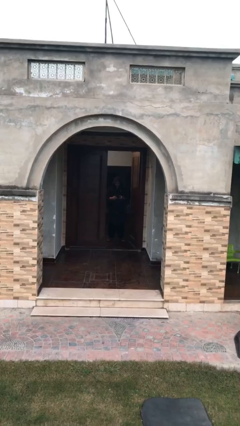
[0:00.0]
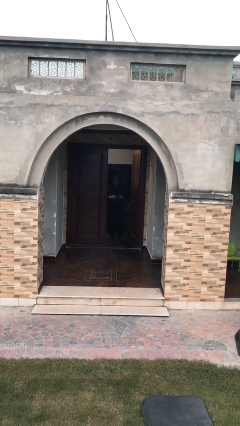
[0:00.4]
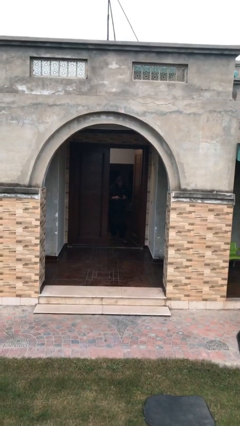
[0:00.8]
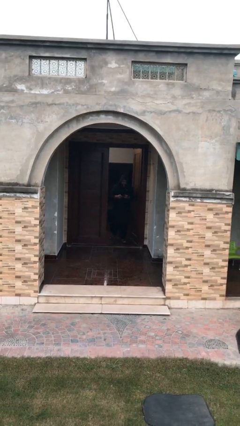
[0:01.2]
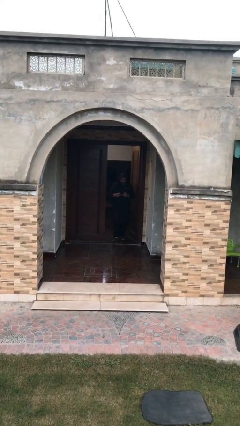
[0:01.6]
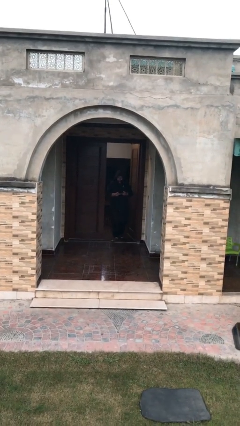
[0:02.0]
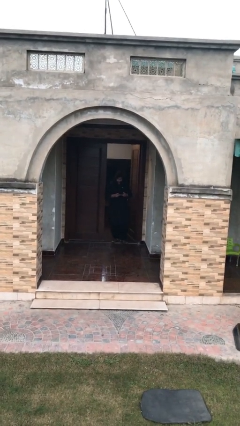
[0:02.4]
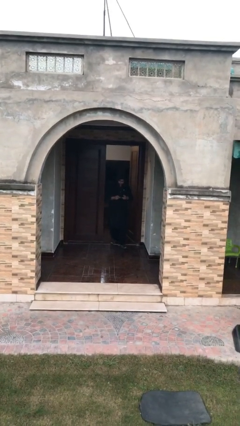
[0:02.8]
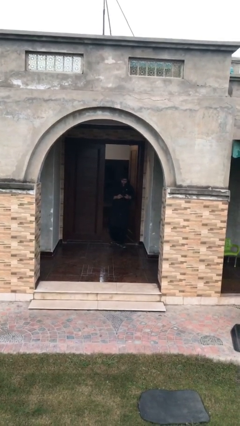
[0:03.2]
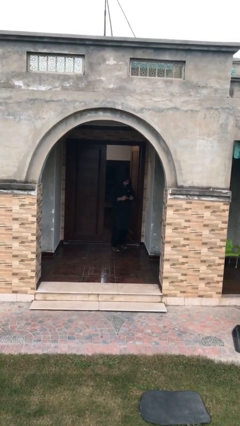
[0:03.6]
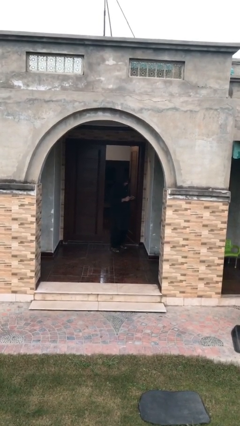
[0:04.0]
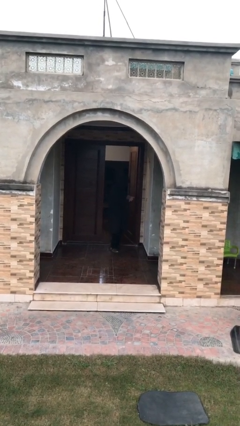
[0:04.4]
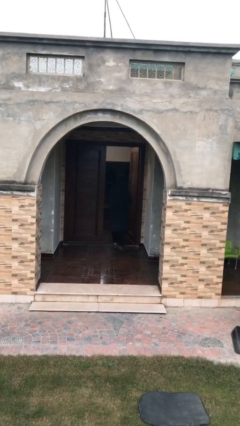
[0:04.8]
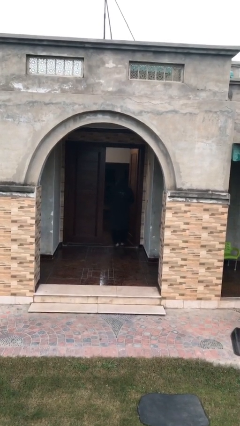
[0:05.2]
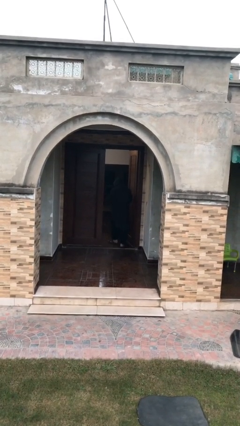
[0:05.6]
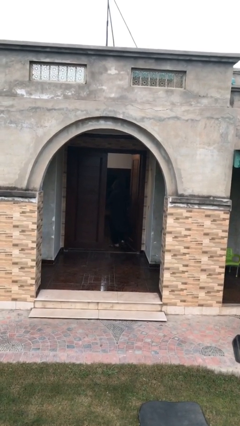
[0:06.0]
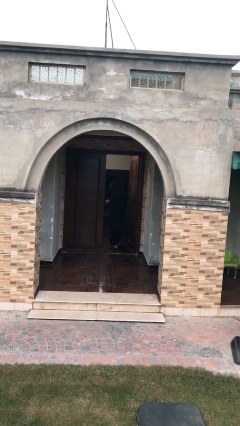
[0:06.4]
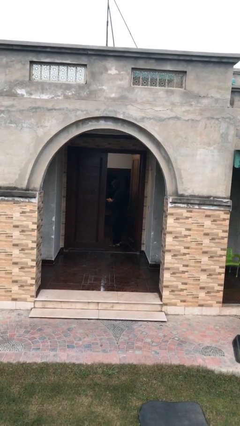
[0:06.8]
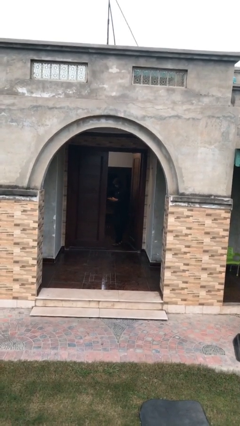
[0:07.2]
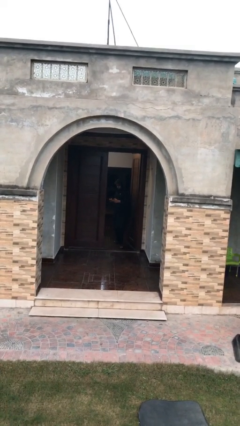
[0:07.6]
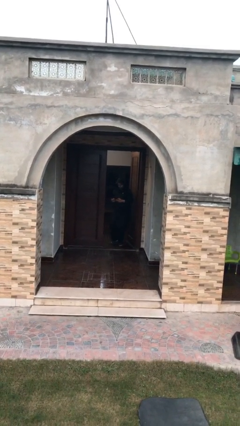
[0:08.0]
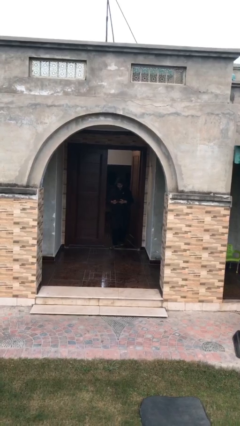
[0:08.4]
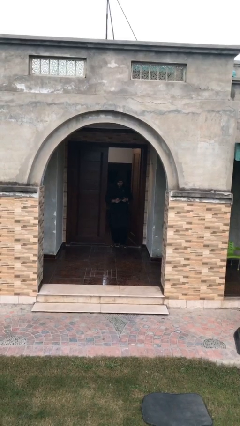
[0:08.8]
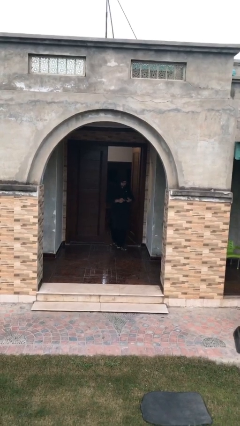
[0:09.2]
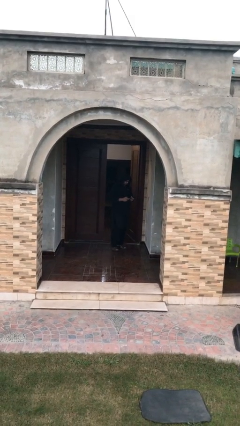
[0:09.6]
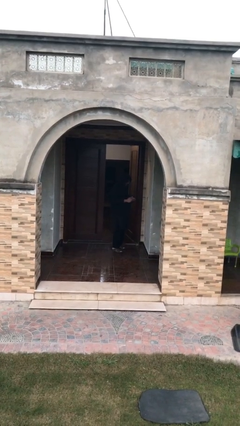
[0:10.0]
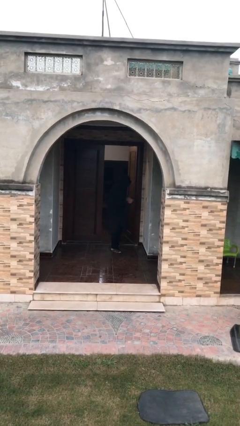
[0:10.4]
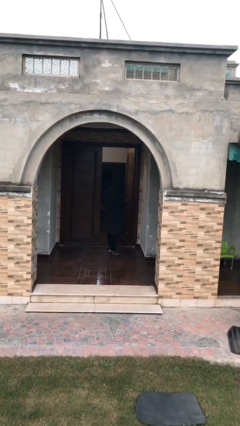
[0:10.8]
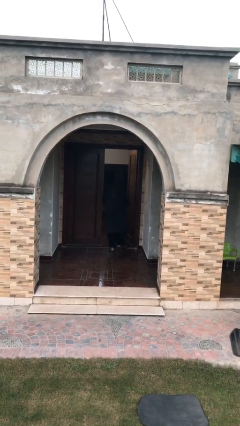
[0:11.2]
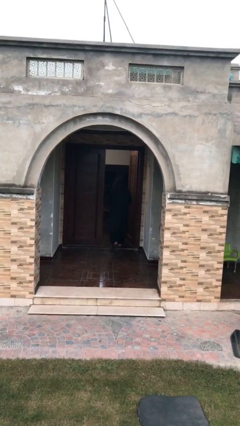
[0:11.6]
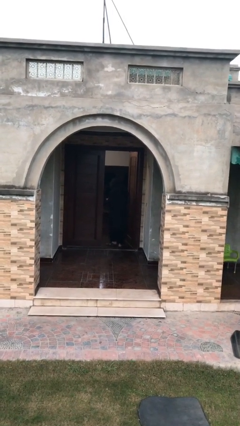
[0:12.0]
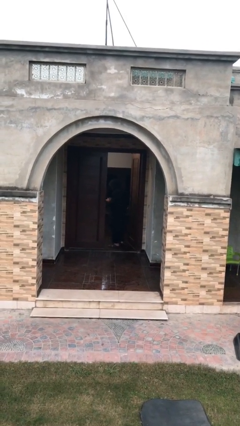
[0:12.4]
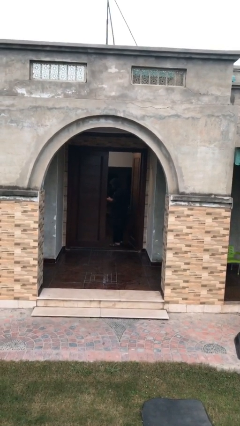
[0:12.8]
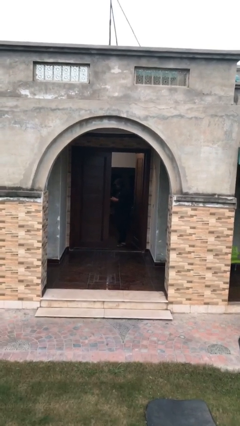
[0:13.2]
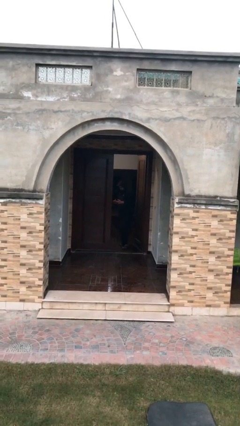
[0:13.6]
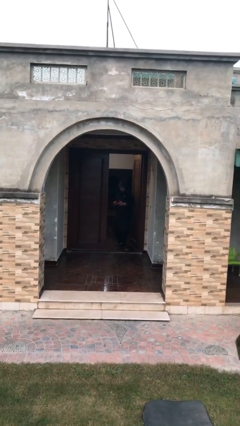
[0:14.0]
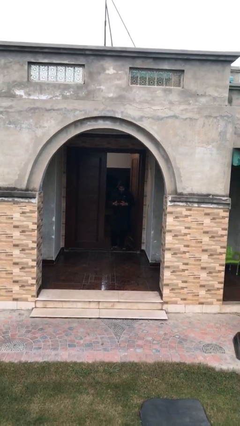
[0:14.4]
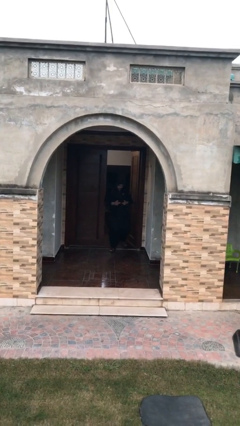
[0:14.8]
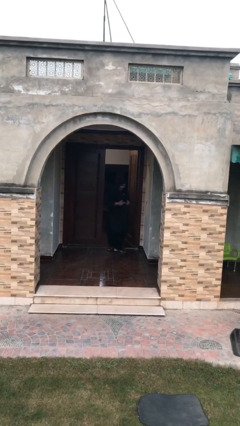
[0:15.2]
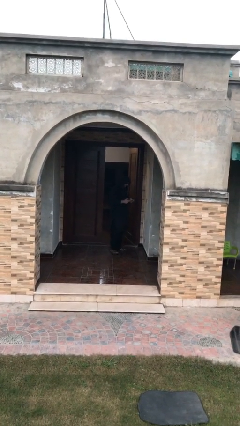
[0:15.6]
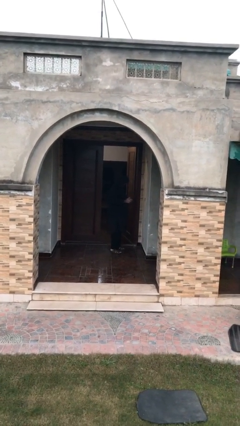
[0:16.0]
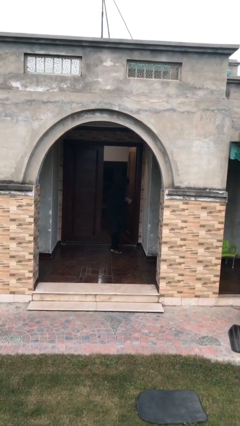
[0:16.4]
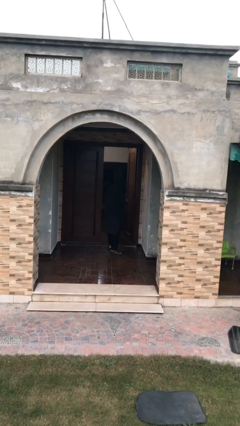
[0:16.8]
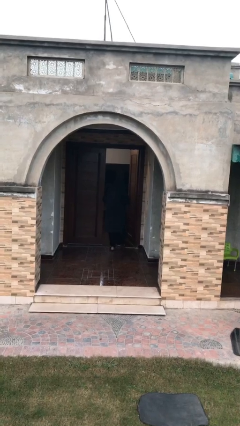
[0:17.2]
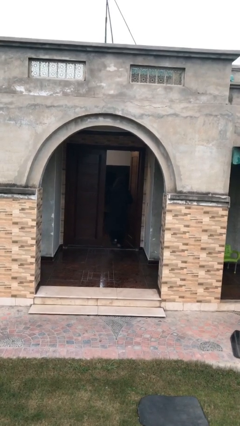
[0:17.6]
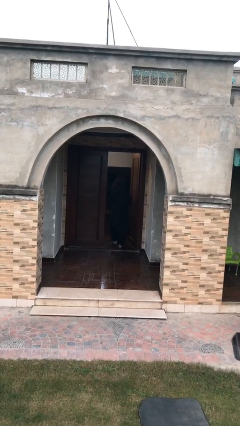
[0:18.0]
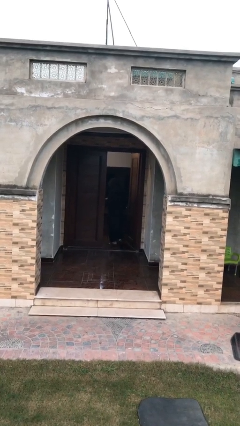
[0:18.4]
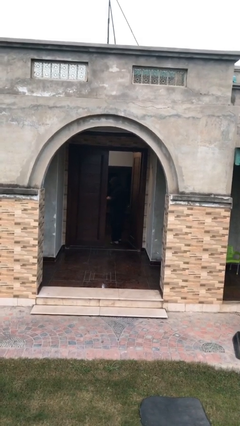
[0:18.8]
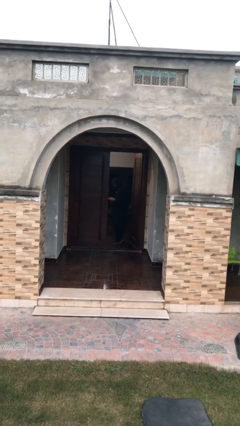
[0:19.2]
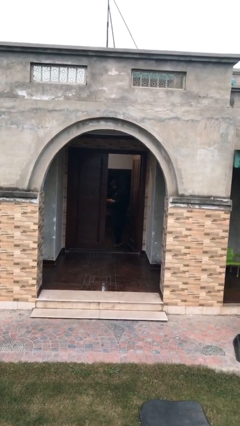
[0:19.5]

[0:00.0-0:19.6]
person texts on phone

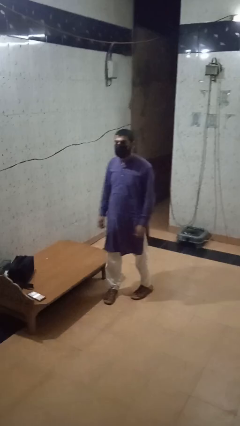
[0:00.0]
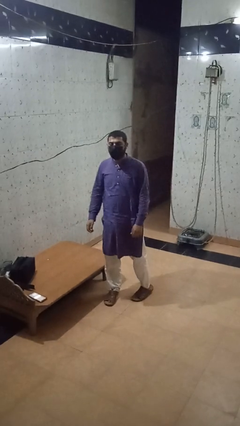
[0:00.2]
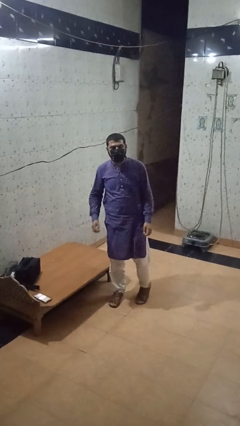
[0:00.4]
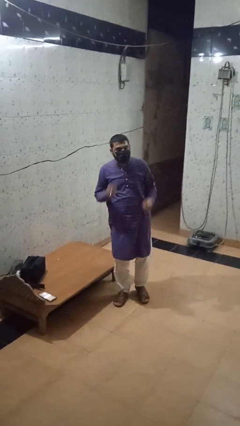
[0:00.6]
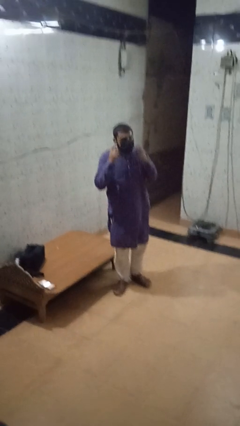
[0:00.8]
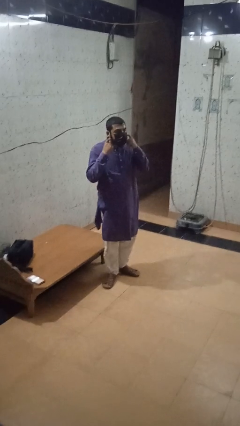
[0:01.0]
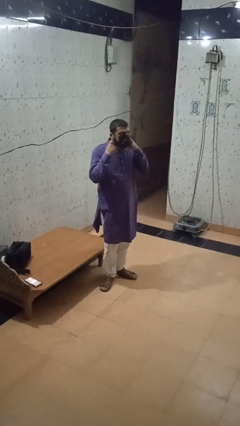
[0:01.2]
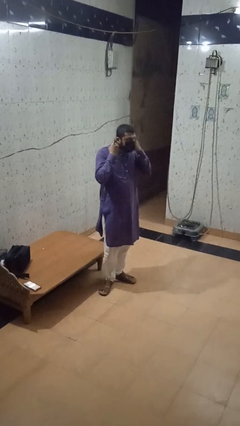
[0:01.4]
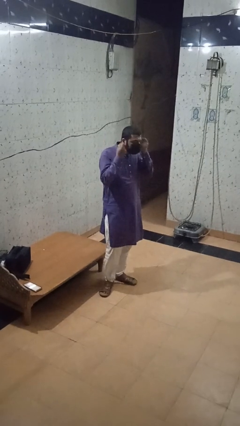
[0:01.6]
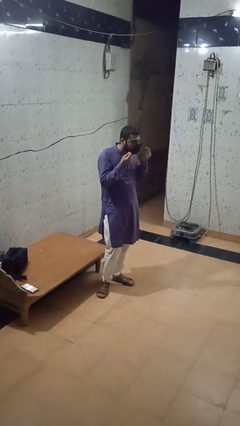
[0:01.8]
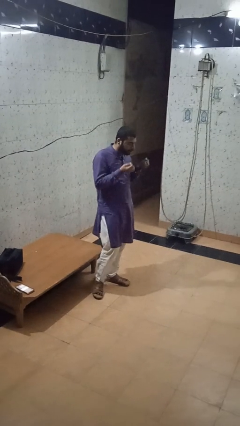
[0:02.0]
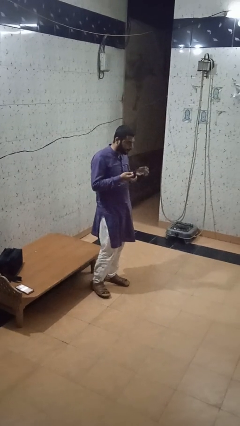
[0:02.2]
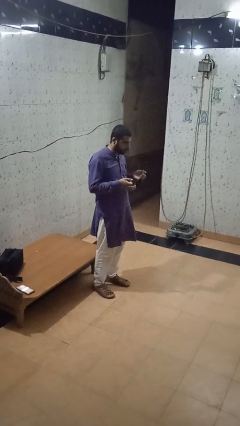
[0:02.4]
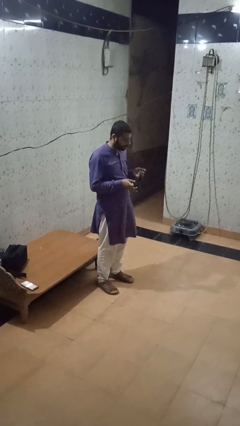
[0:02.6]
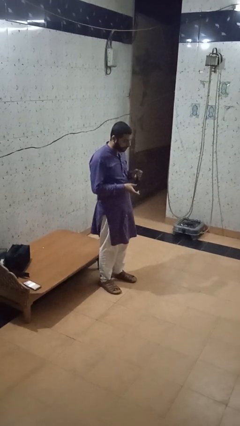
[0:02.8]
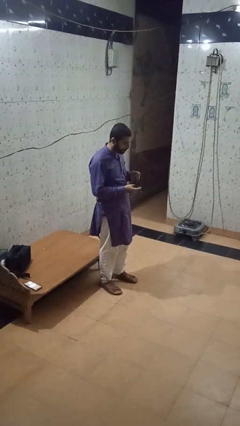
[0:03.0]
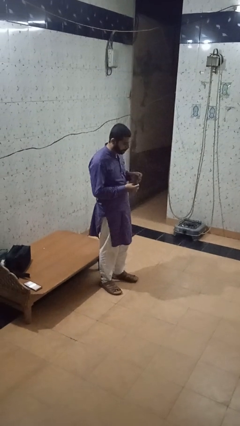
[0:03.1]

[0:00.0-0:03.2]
person takes off facemask

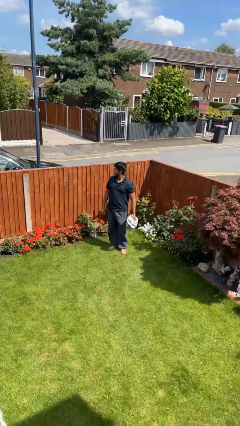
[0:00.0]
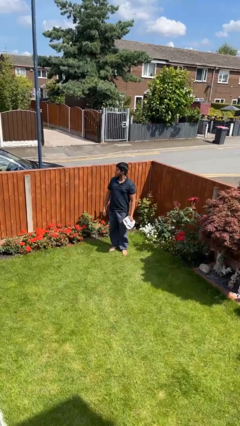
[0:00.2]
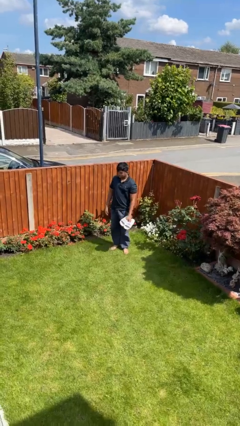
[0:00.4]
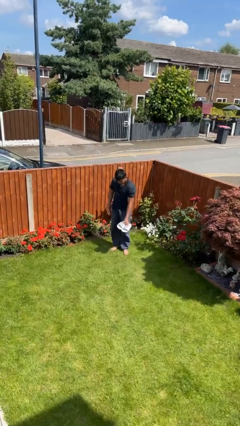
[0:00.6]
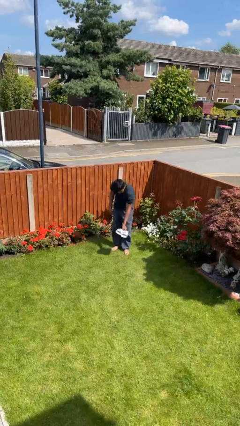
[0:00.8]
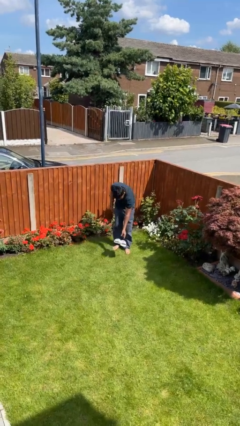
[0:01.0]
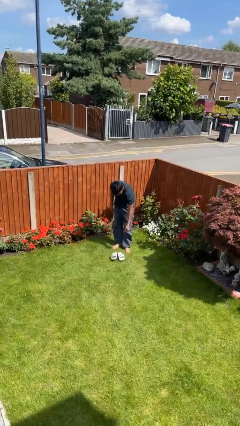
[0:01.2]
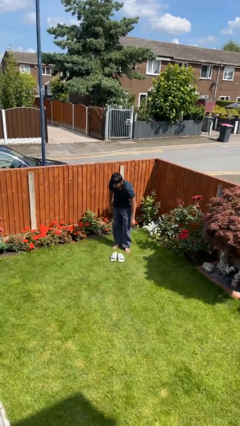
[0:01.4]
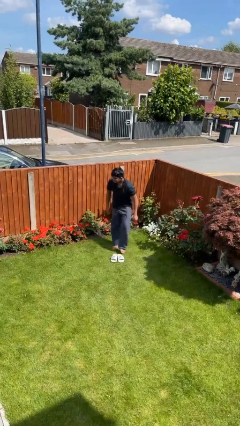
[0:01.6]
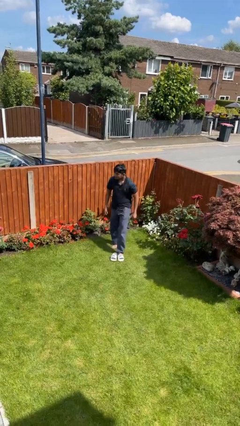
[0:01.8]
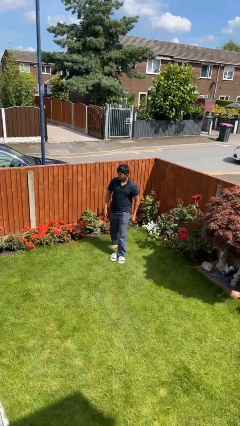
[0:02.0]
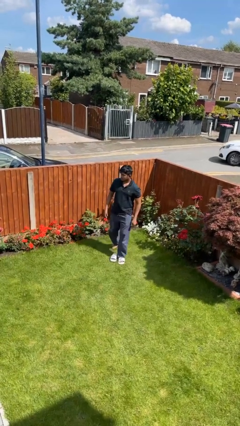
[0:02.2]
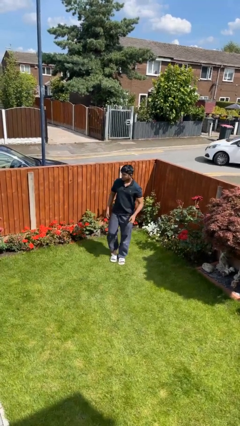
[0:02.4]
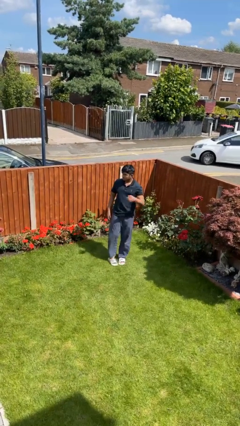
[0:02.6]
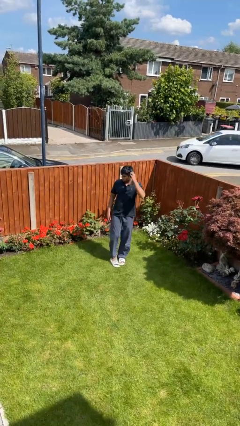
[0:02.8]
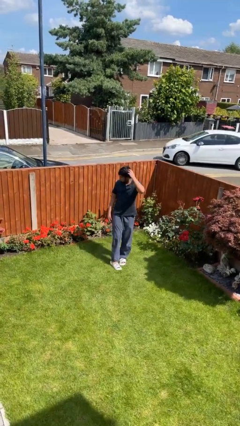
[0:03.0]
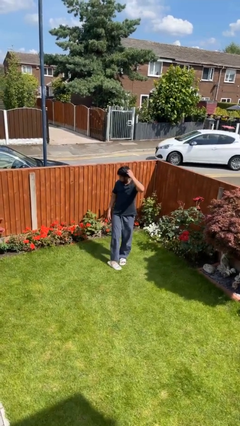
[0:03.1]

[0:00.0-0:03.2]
person puts on shoes

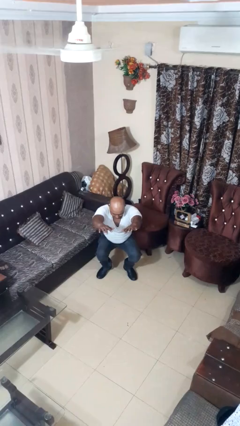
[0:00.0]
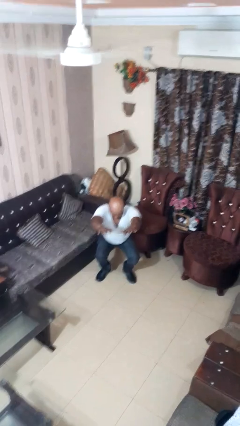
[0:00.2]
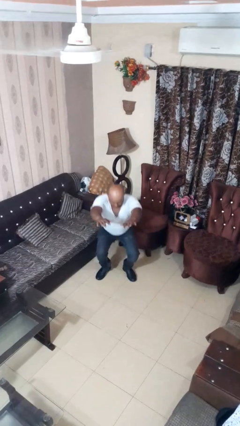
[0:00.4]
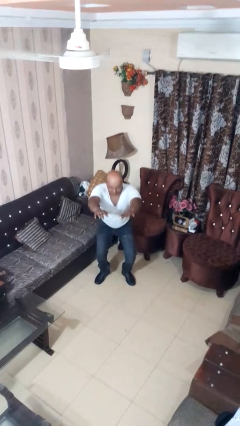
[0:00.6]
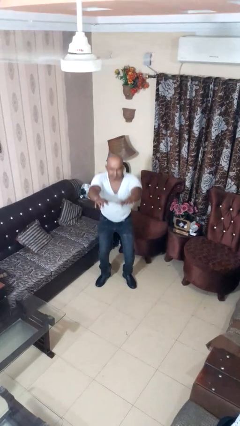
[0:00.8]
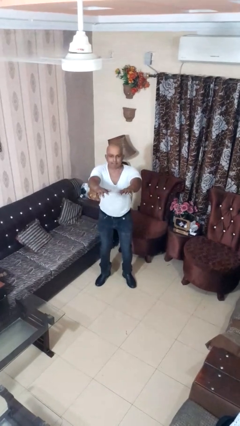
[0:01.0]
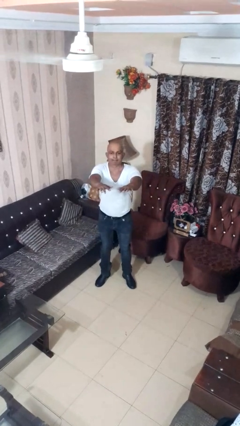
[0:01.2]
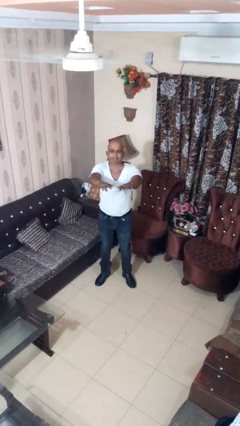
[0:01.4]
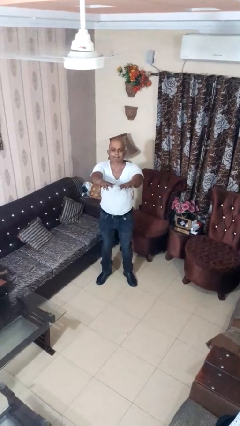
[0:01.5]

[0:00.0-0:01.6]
person stands up
